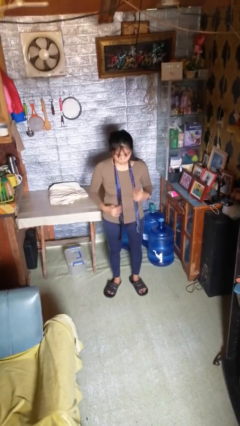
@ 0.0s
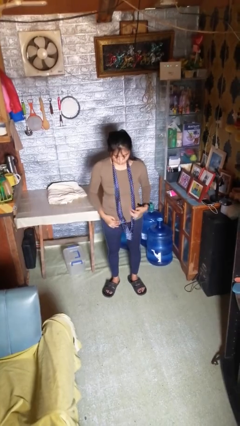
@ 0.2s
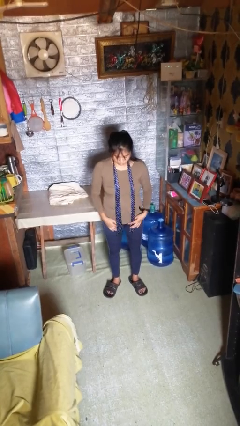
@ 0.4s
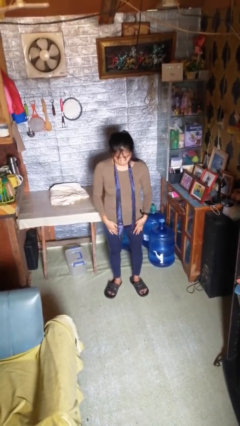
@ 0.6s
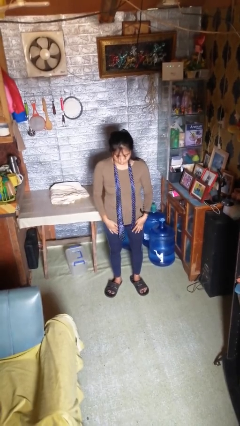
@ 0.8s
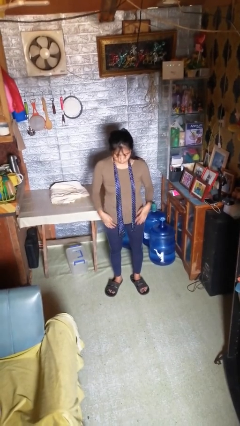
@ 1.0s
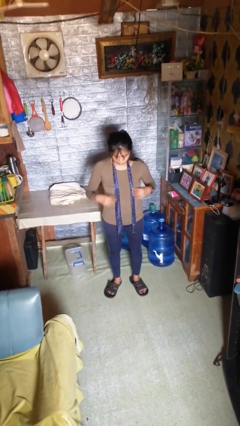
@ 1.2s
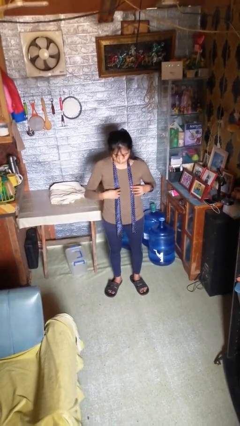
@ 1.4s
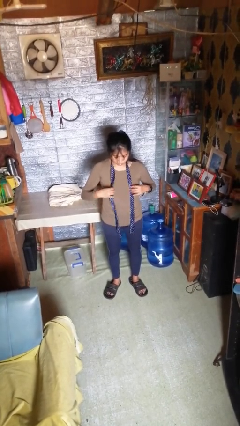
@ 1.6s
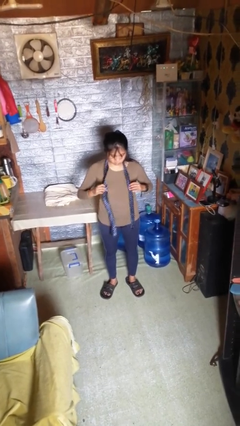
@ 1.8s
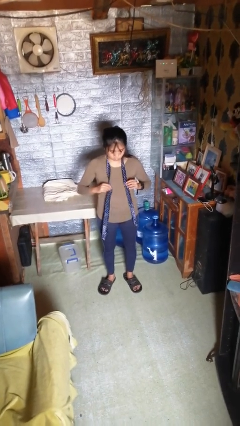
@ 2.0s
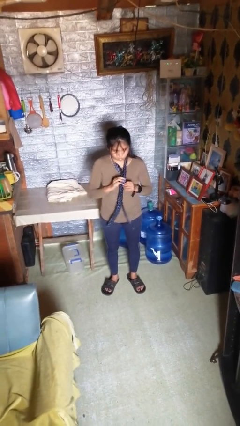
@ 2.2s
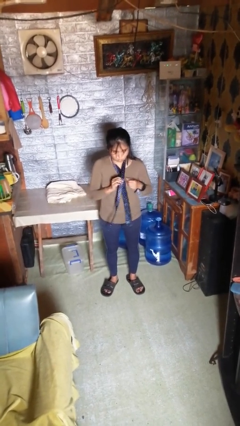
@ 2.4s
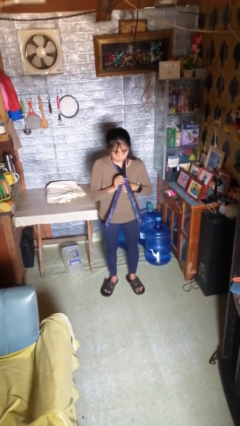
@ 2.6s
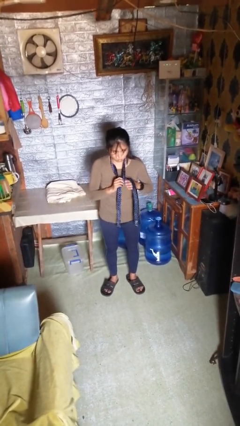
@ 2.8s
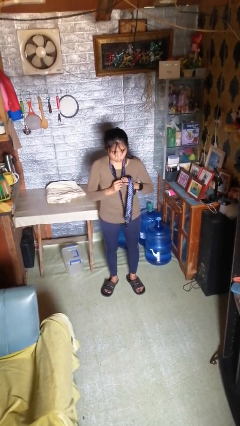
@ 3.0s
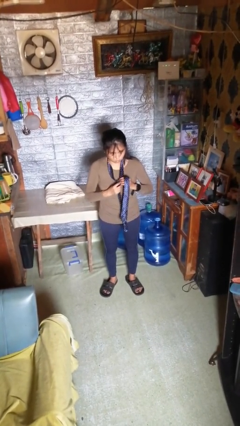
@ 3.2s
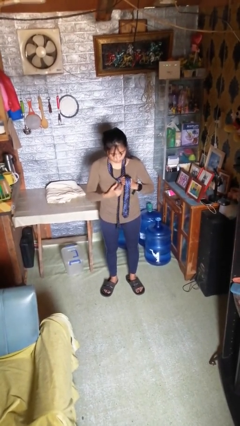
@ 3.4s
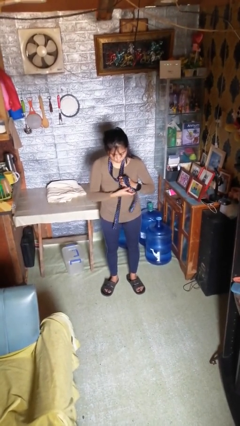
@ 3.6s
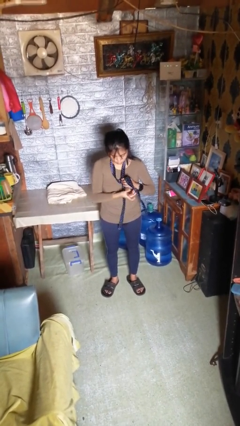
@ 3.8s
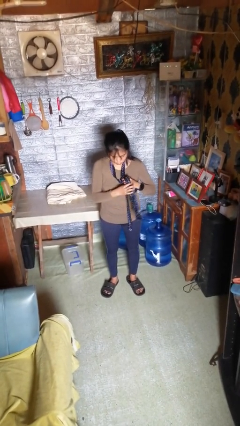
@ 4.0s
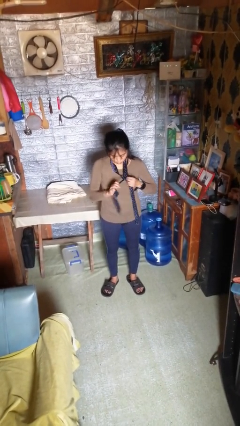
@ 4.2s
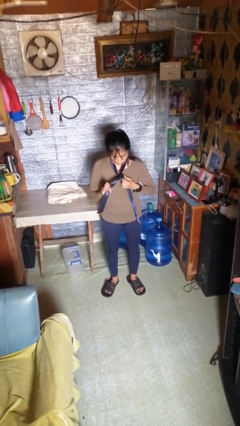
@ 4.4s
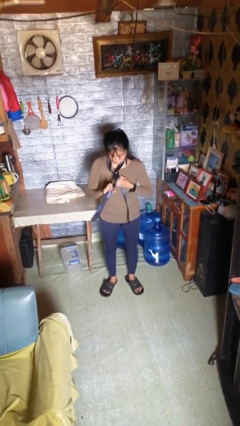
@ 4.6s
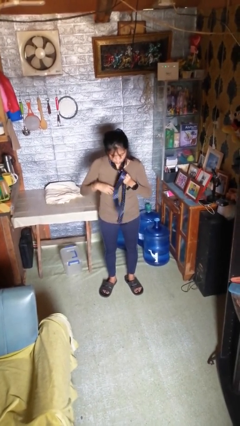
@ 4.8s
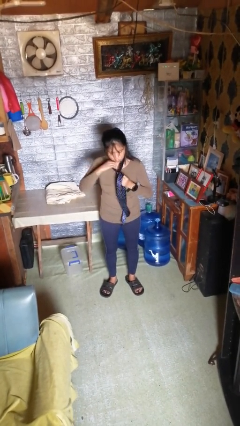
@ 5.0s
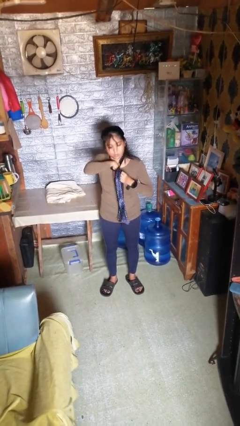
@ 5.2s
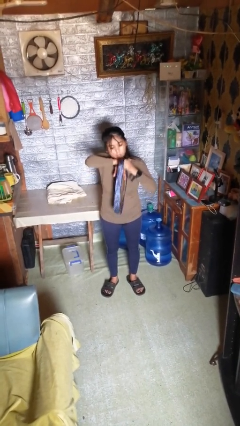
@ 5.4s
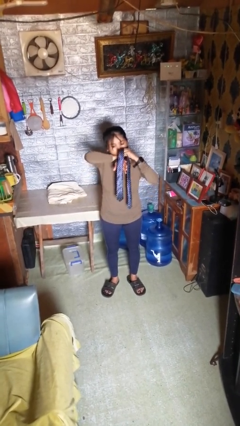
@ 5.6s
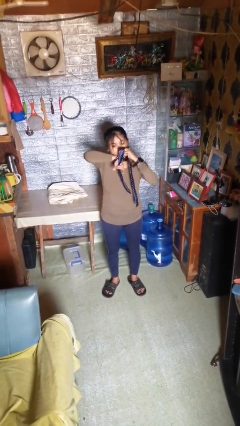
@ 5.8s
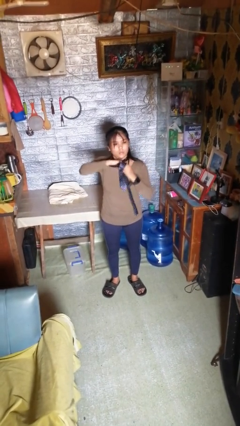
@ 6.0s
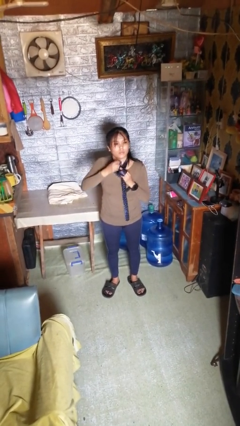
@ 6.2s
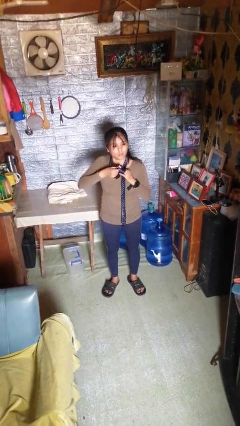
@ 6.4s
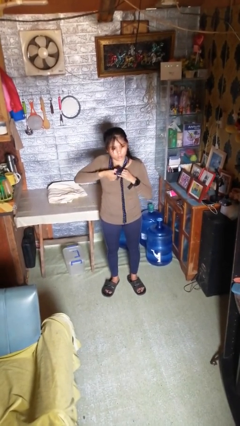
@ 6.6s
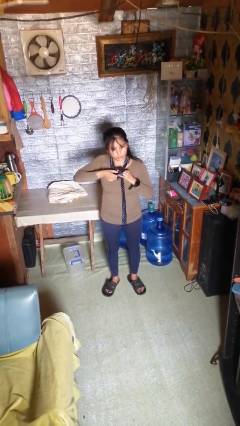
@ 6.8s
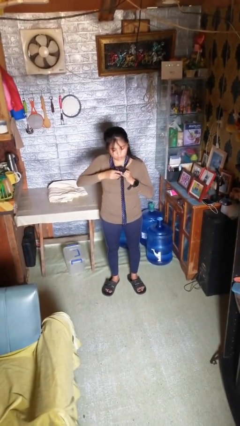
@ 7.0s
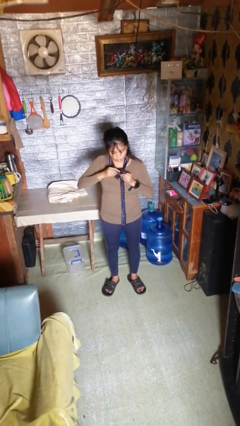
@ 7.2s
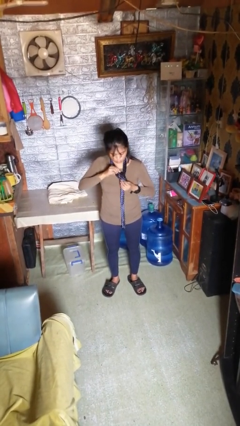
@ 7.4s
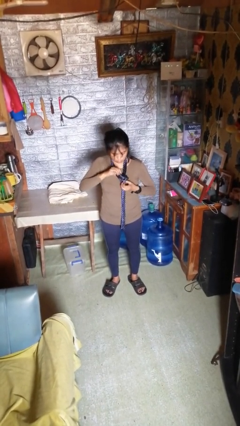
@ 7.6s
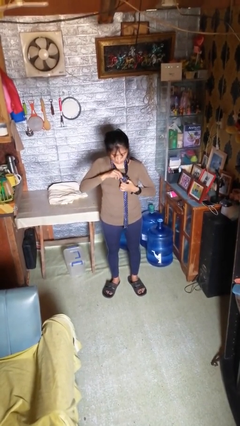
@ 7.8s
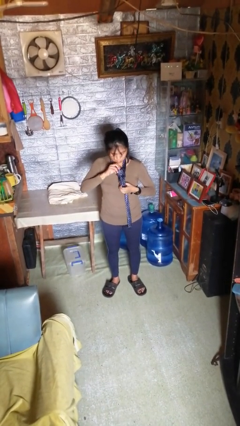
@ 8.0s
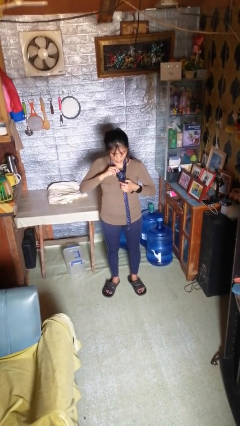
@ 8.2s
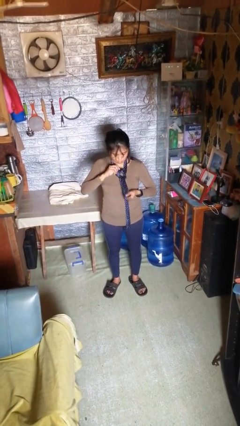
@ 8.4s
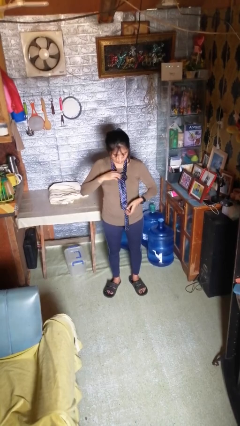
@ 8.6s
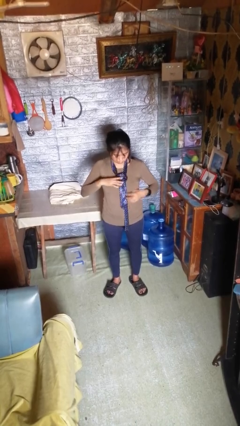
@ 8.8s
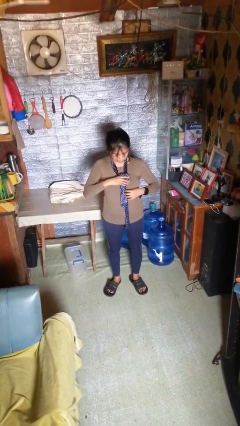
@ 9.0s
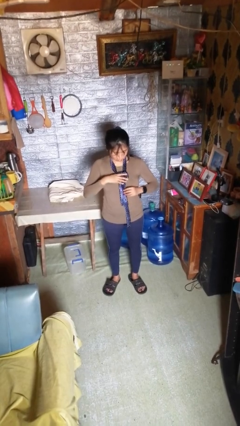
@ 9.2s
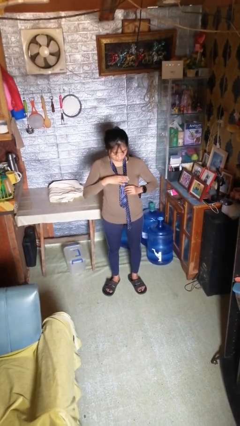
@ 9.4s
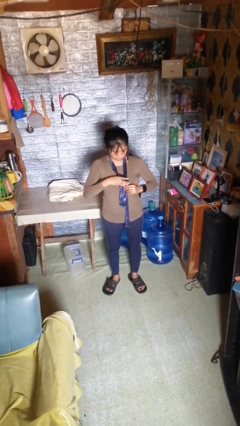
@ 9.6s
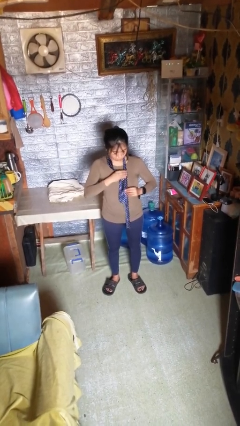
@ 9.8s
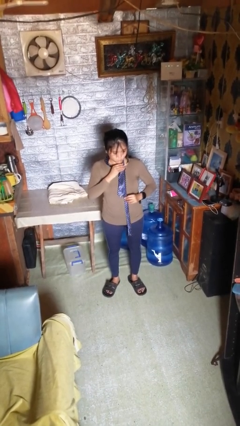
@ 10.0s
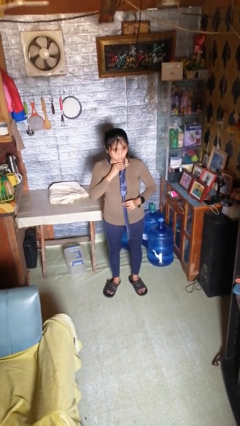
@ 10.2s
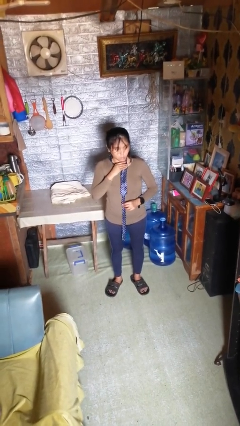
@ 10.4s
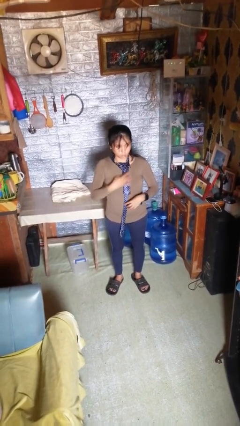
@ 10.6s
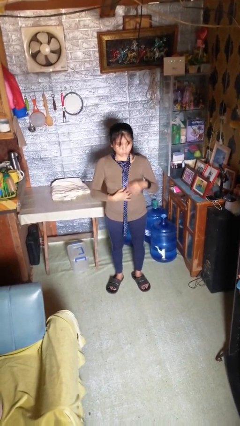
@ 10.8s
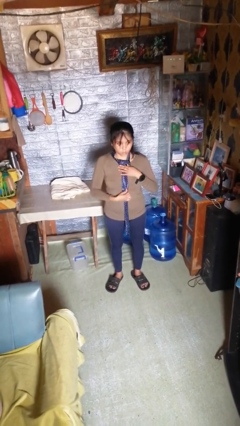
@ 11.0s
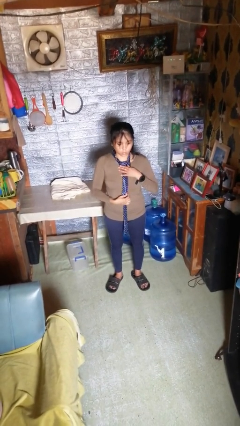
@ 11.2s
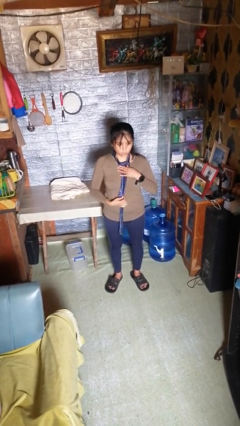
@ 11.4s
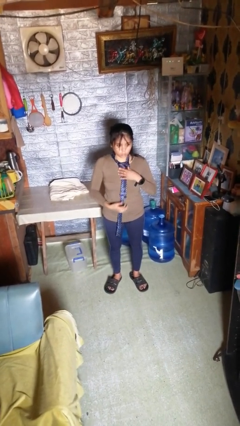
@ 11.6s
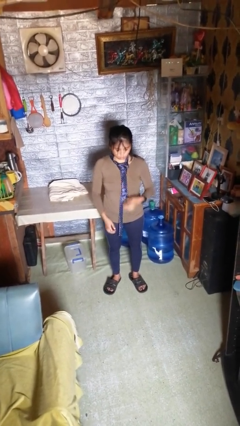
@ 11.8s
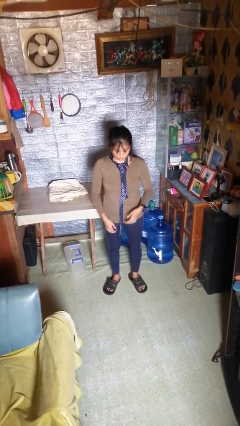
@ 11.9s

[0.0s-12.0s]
person puts on necktie

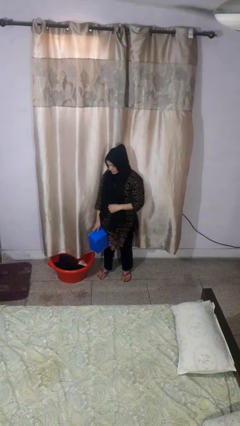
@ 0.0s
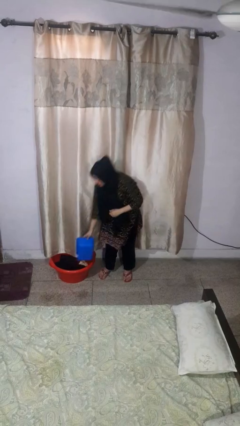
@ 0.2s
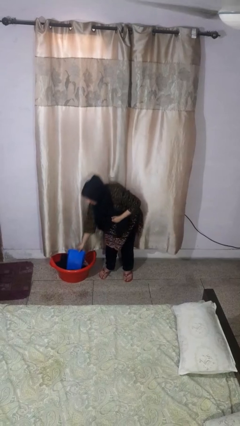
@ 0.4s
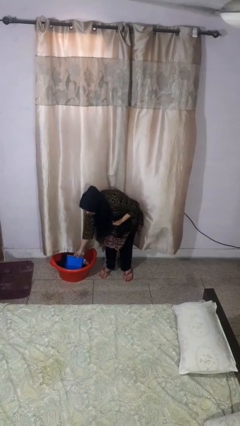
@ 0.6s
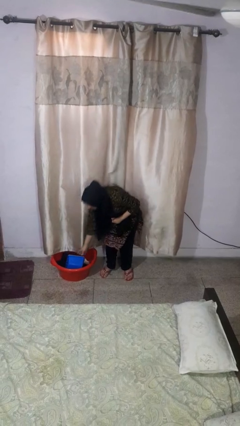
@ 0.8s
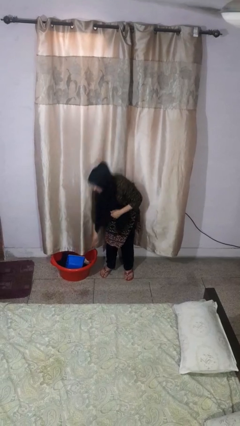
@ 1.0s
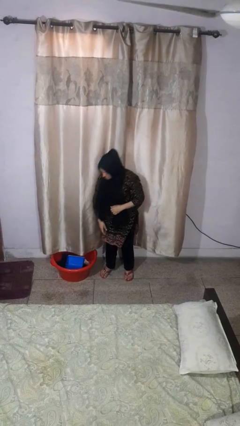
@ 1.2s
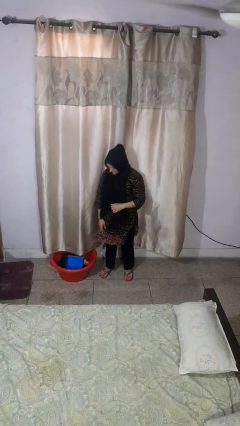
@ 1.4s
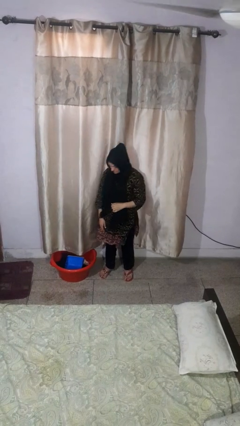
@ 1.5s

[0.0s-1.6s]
person puts object into basket

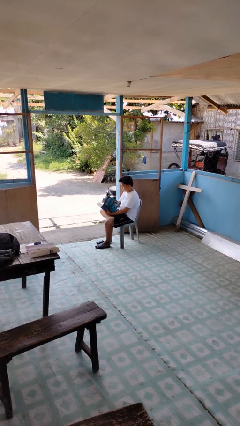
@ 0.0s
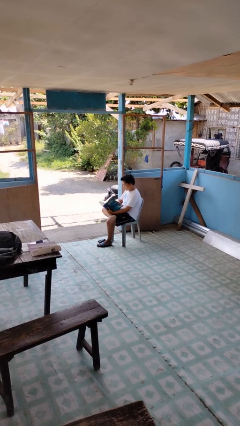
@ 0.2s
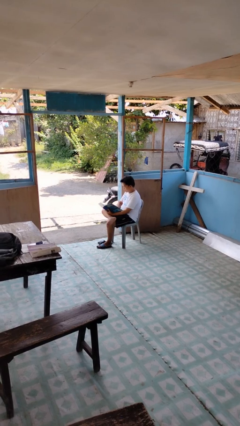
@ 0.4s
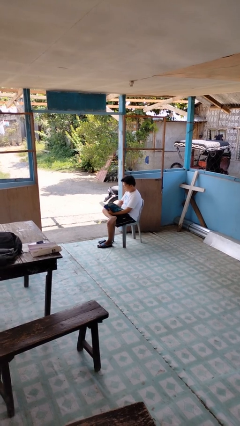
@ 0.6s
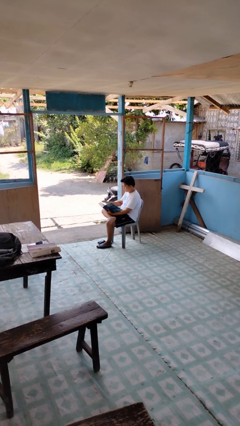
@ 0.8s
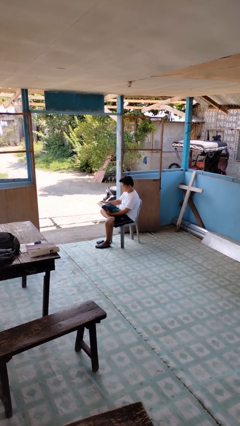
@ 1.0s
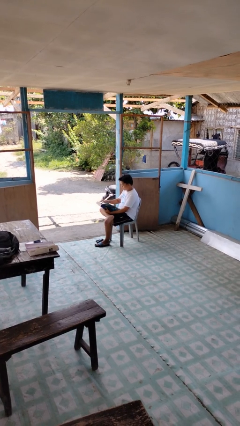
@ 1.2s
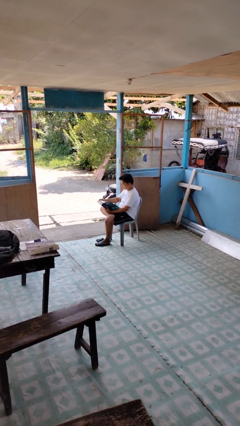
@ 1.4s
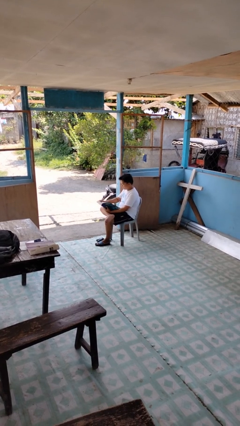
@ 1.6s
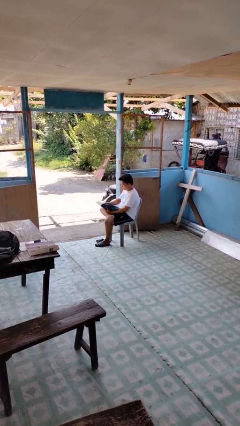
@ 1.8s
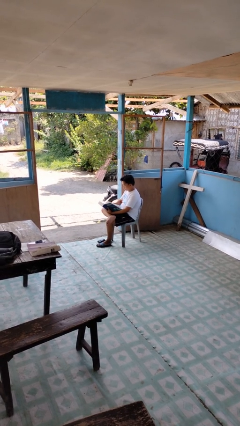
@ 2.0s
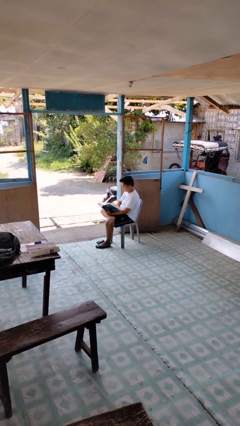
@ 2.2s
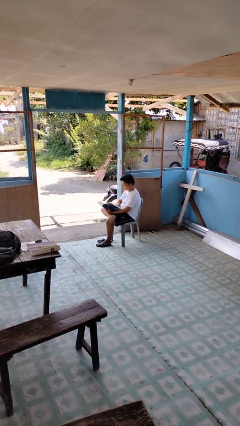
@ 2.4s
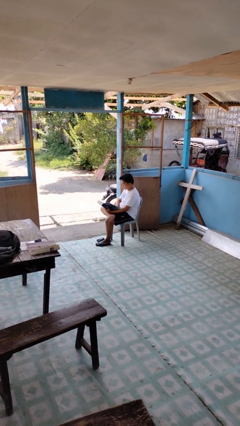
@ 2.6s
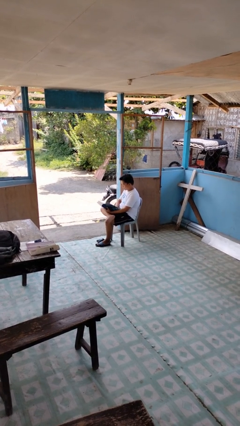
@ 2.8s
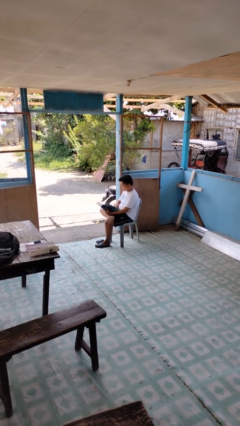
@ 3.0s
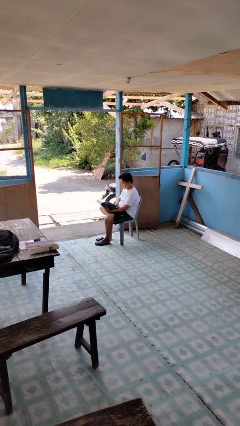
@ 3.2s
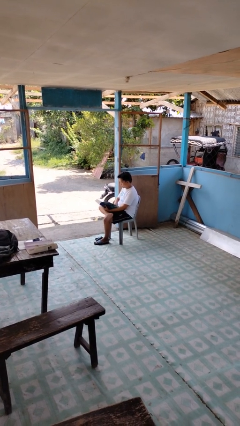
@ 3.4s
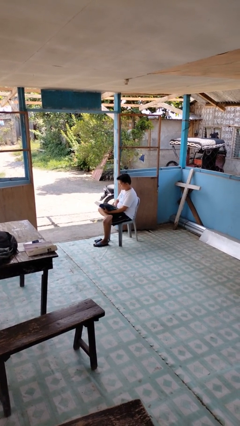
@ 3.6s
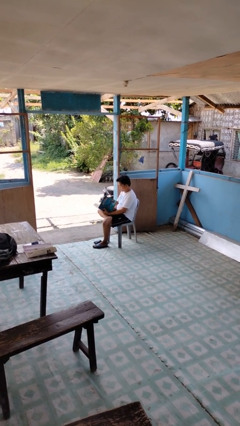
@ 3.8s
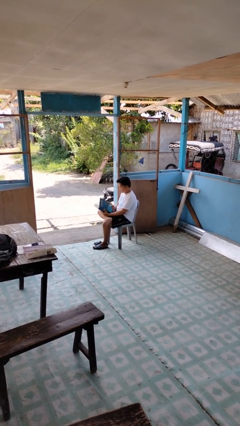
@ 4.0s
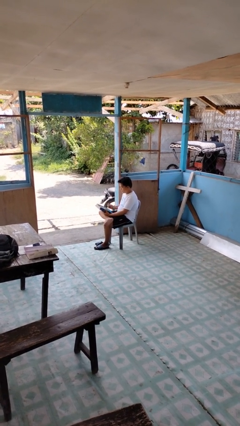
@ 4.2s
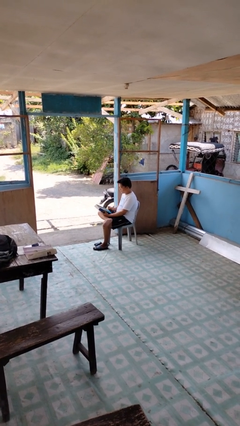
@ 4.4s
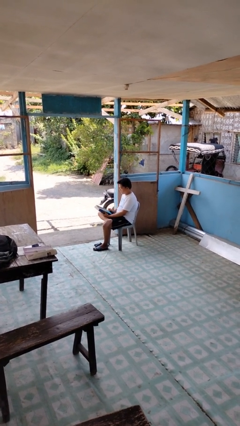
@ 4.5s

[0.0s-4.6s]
person reads book

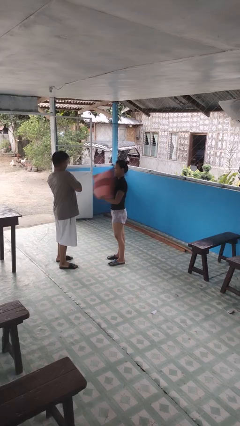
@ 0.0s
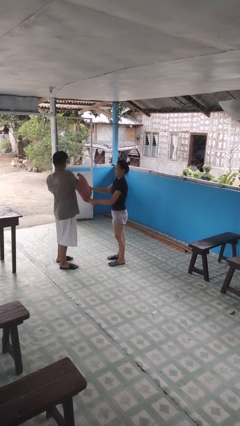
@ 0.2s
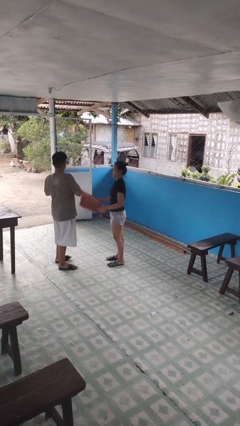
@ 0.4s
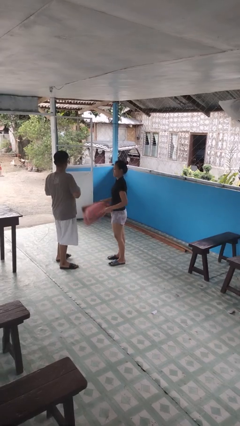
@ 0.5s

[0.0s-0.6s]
person hits person with pillow
